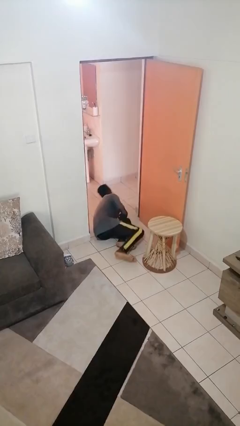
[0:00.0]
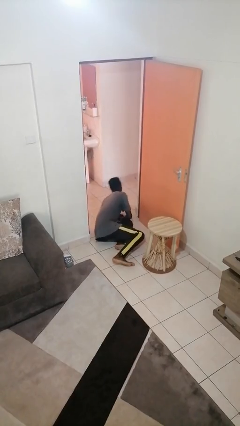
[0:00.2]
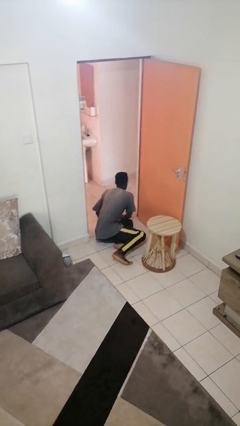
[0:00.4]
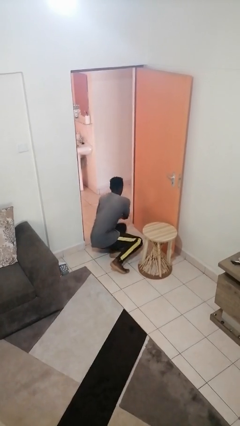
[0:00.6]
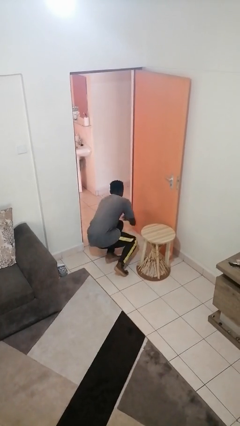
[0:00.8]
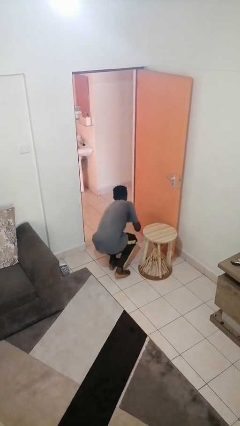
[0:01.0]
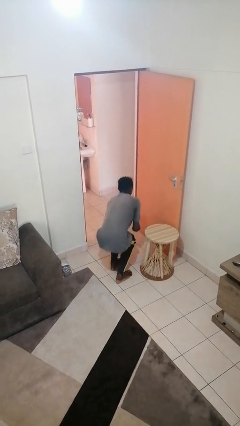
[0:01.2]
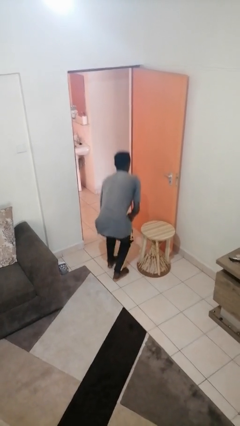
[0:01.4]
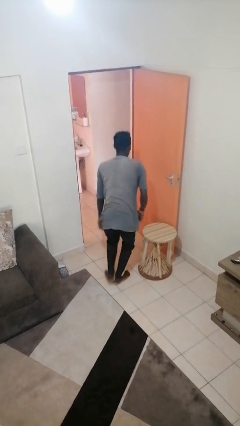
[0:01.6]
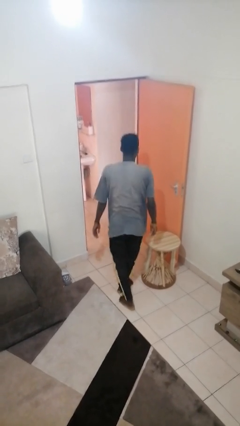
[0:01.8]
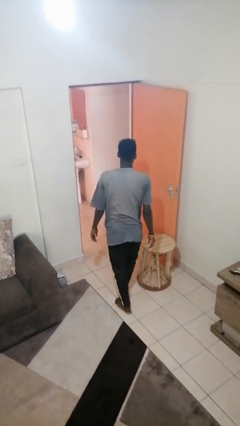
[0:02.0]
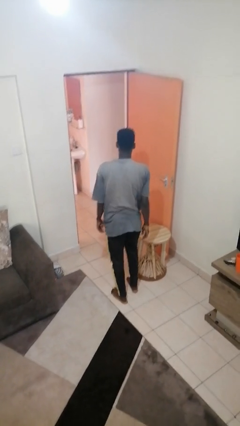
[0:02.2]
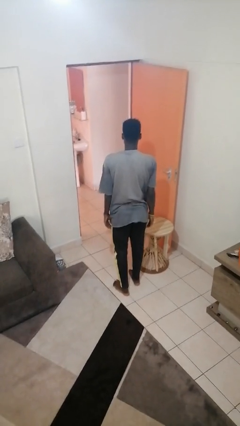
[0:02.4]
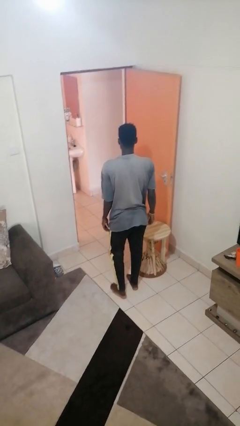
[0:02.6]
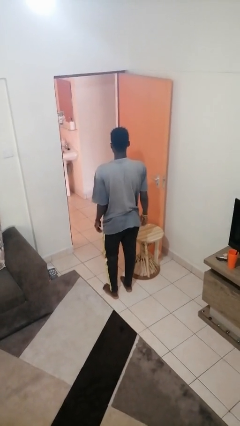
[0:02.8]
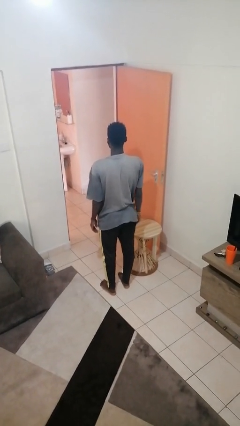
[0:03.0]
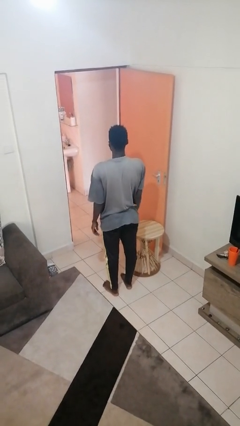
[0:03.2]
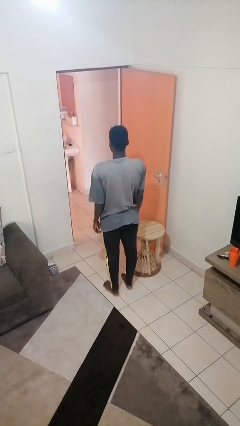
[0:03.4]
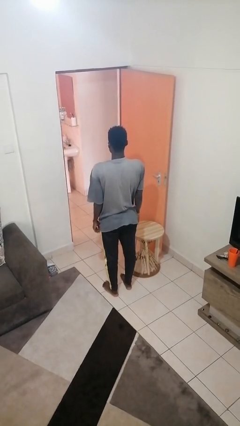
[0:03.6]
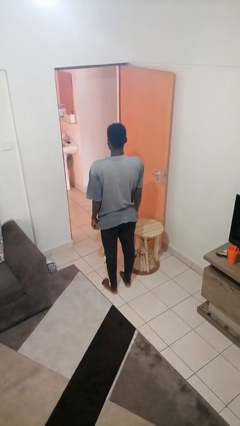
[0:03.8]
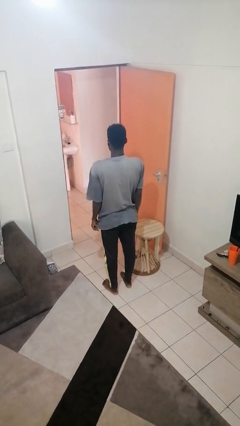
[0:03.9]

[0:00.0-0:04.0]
person stands up from floor

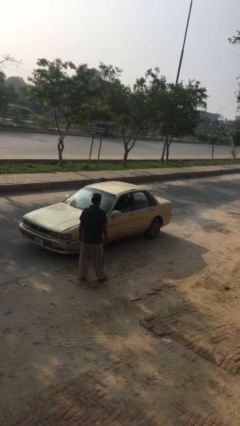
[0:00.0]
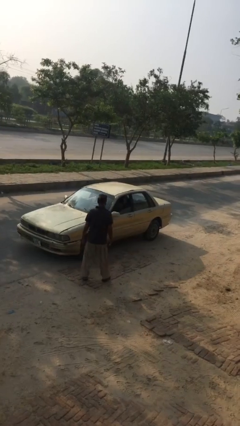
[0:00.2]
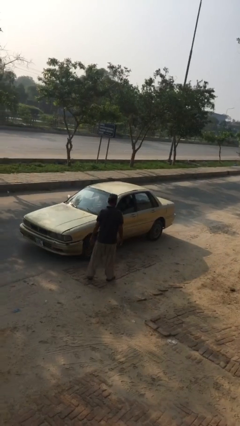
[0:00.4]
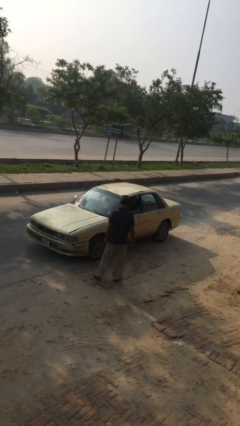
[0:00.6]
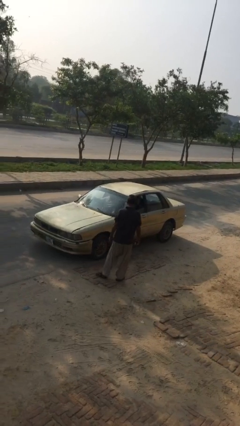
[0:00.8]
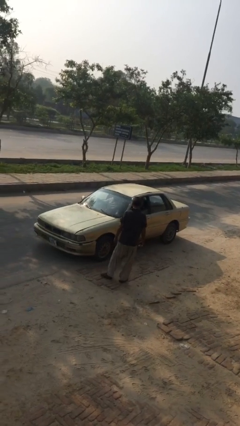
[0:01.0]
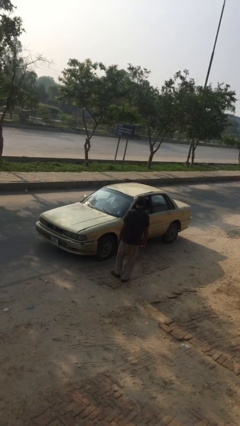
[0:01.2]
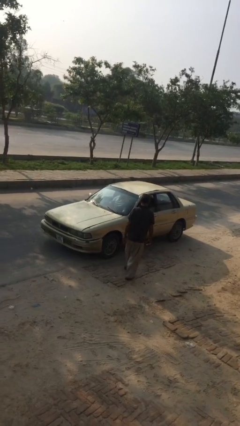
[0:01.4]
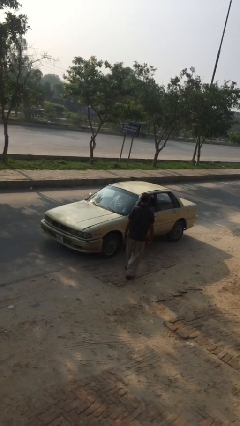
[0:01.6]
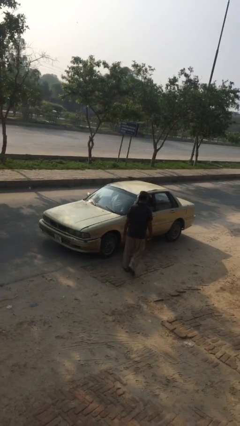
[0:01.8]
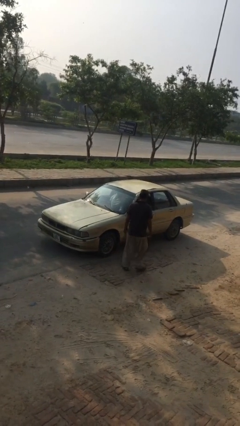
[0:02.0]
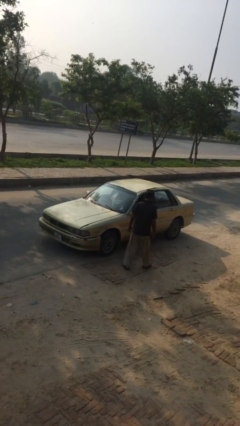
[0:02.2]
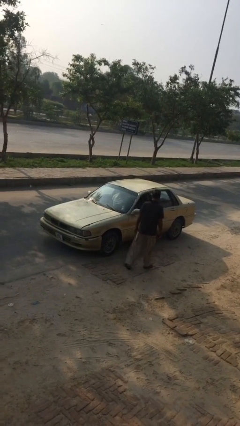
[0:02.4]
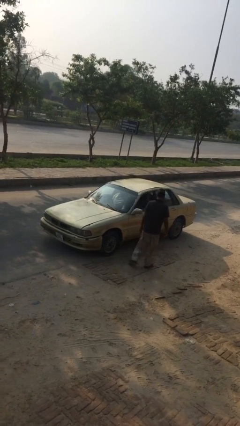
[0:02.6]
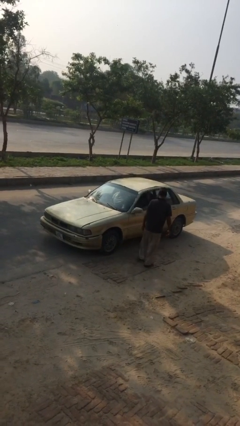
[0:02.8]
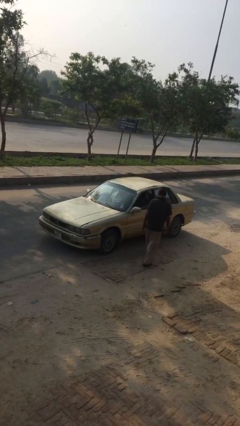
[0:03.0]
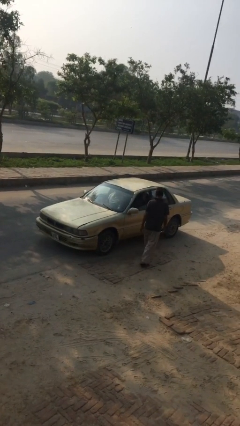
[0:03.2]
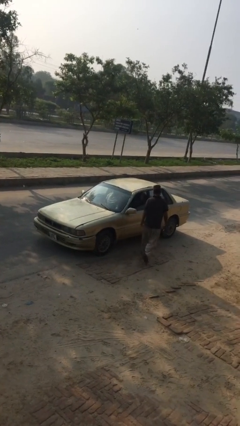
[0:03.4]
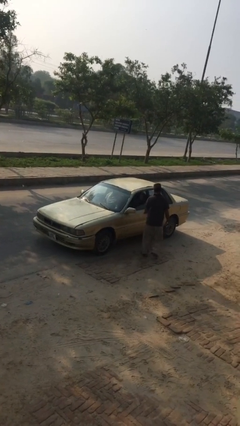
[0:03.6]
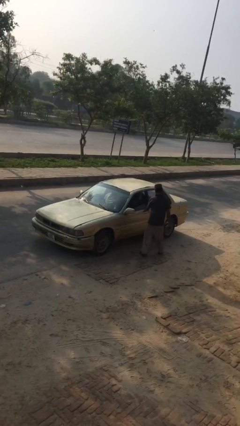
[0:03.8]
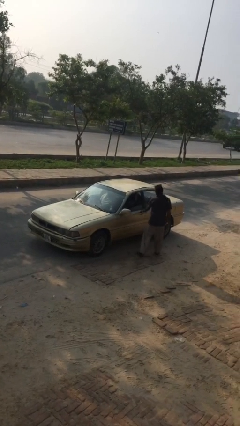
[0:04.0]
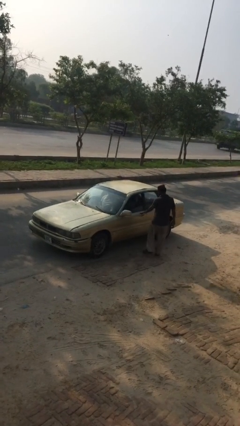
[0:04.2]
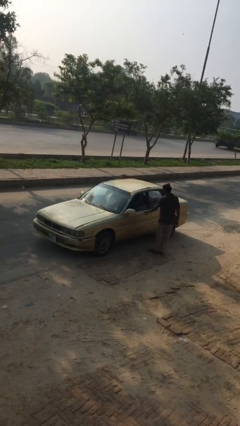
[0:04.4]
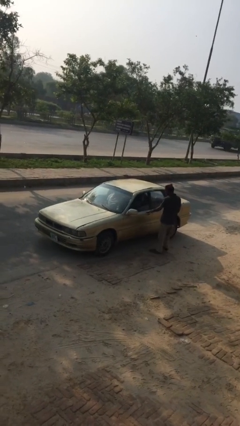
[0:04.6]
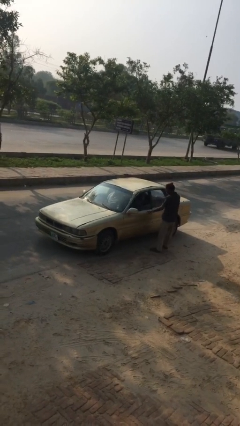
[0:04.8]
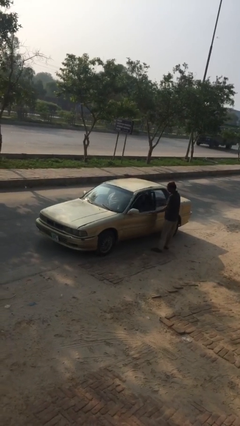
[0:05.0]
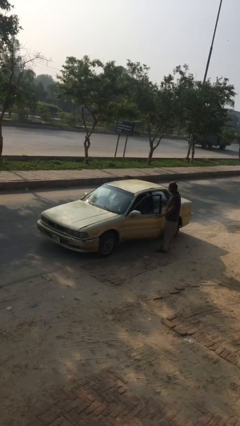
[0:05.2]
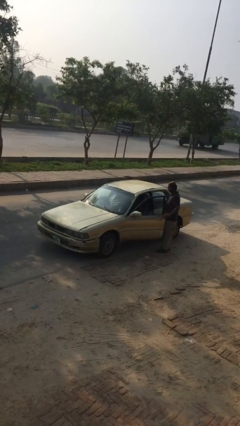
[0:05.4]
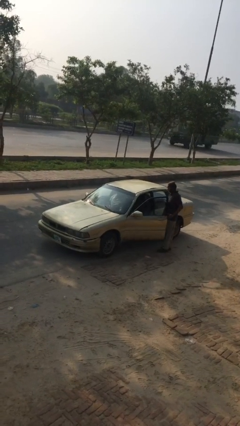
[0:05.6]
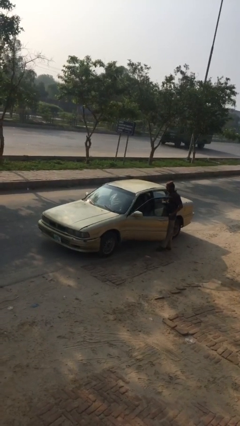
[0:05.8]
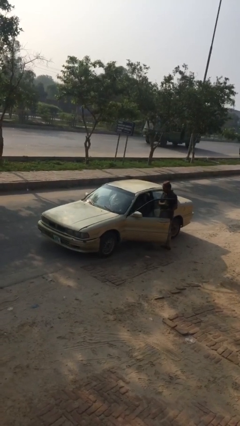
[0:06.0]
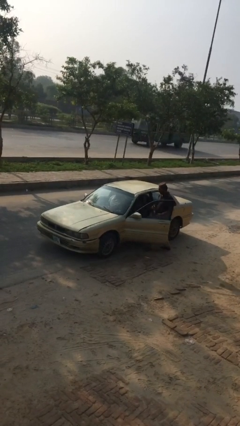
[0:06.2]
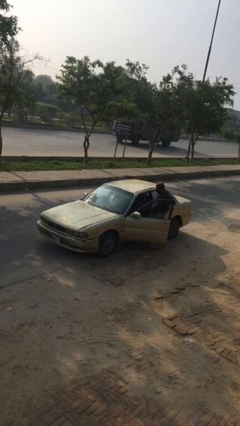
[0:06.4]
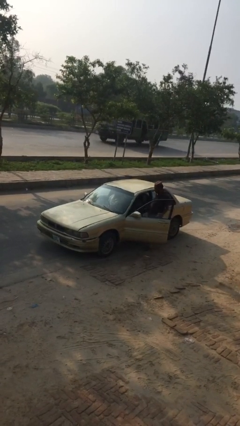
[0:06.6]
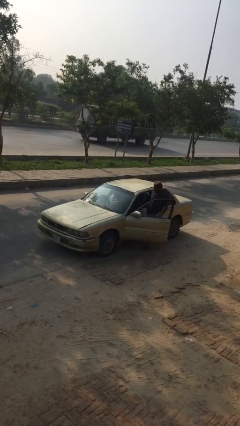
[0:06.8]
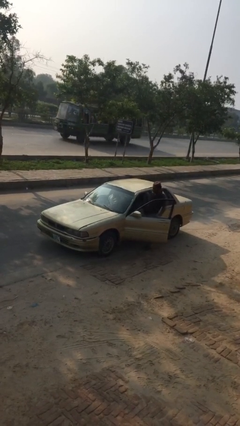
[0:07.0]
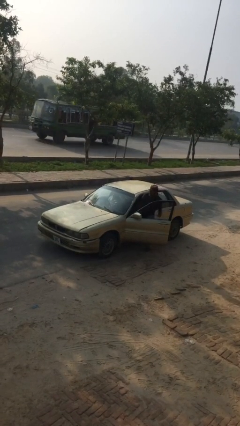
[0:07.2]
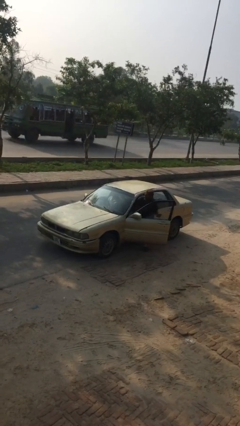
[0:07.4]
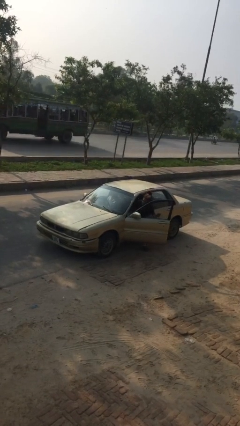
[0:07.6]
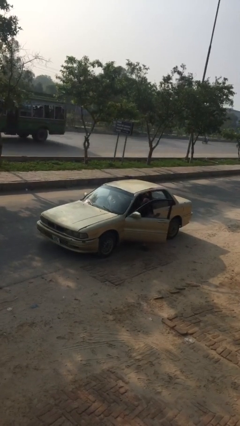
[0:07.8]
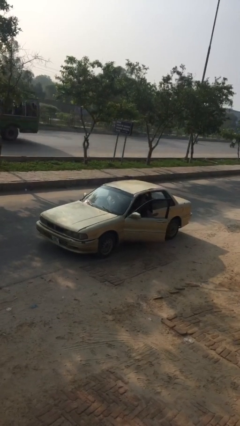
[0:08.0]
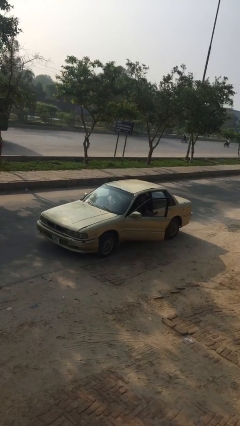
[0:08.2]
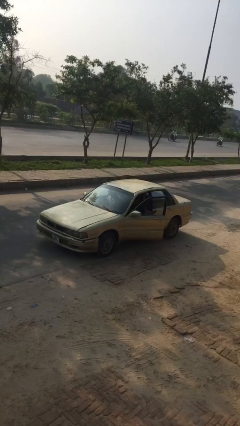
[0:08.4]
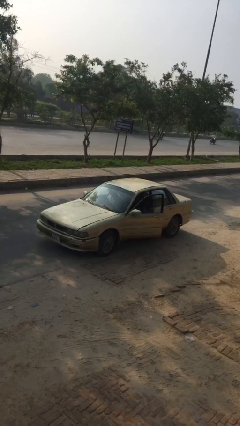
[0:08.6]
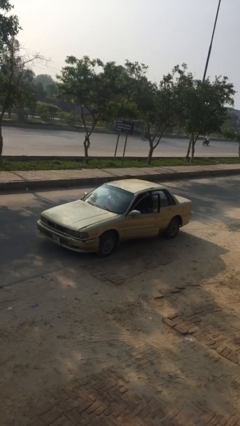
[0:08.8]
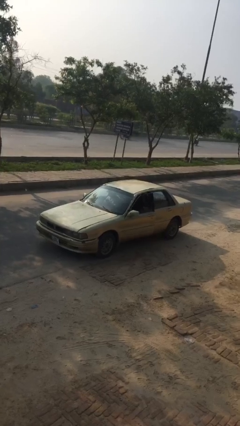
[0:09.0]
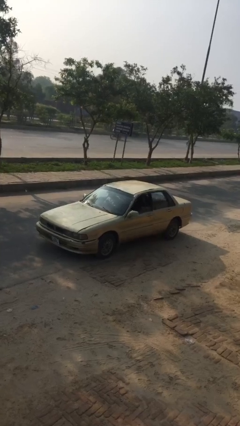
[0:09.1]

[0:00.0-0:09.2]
car picks up person

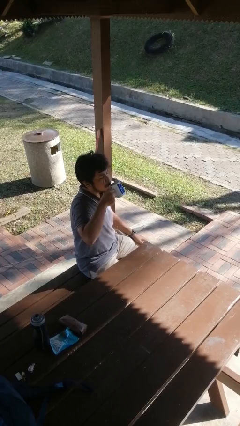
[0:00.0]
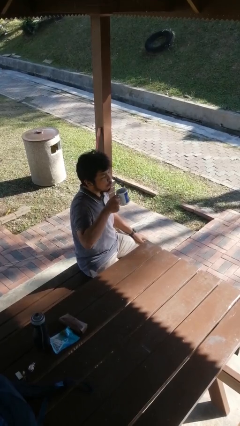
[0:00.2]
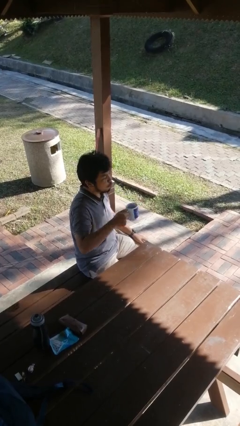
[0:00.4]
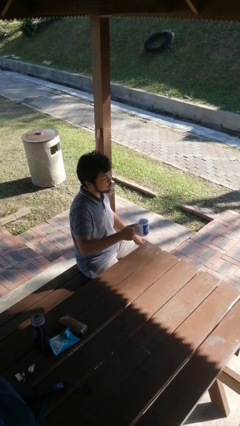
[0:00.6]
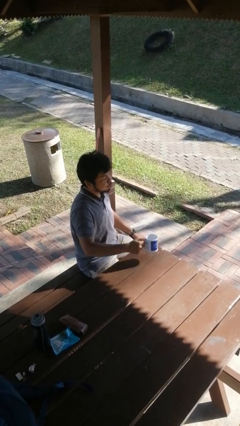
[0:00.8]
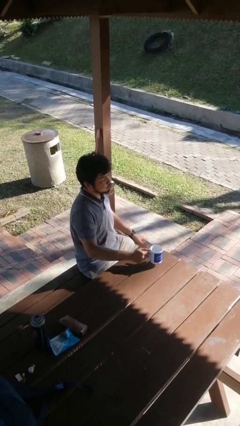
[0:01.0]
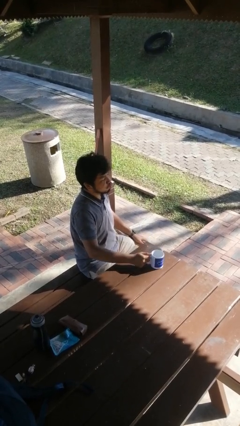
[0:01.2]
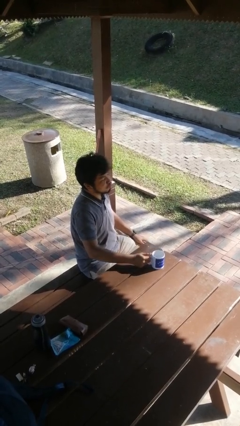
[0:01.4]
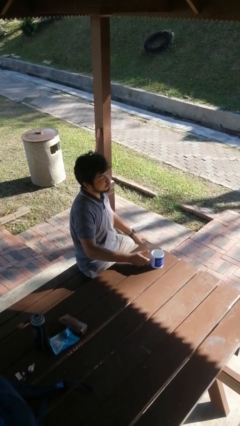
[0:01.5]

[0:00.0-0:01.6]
person puts down object on table

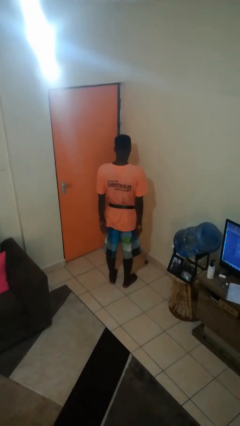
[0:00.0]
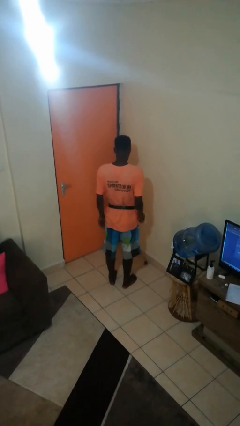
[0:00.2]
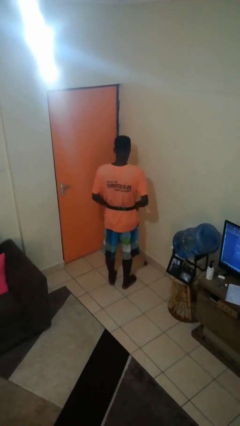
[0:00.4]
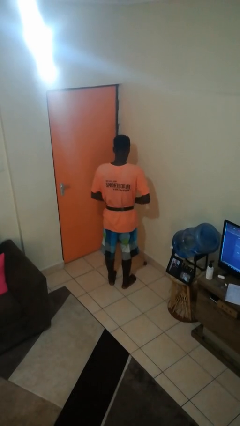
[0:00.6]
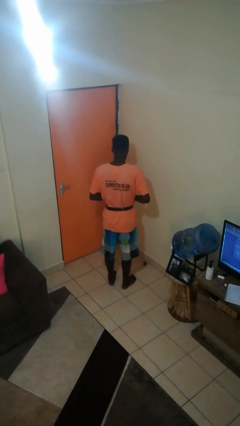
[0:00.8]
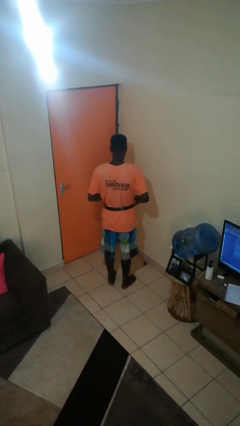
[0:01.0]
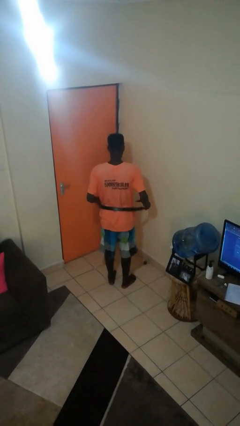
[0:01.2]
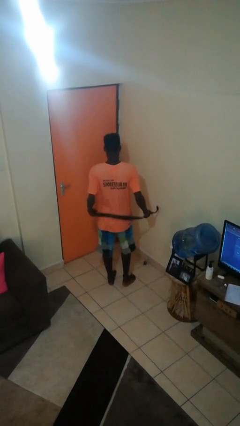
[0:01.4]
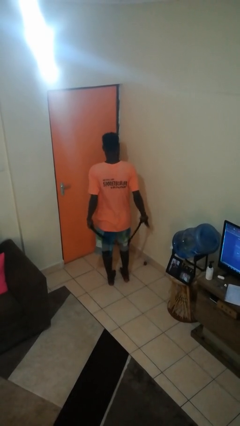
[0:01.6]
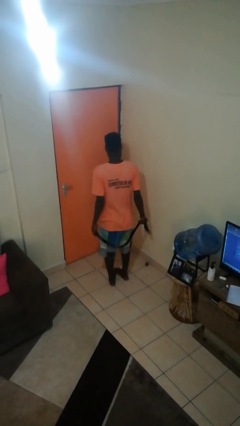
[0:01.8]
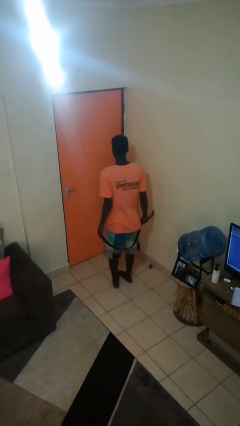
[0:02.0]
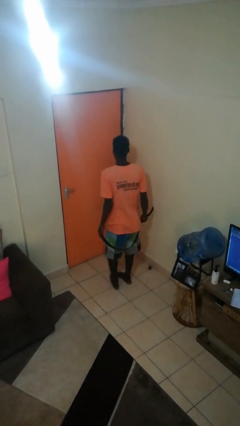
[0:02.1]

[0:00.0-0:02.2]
person takes off belt

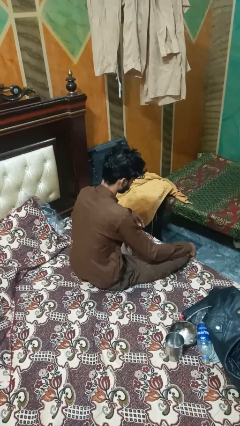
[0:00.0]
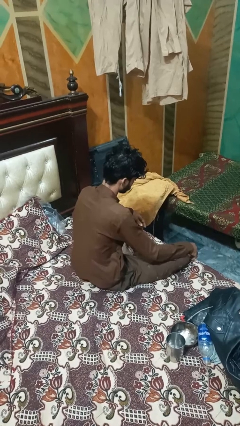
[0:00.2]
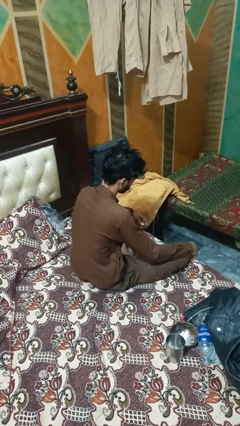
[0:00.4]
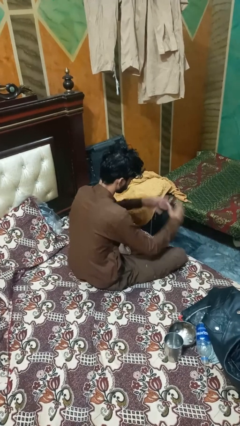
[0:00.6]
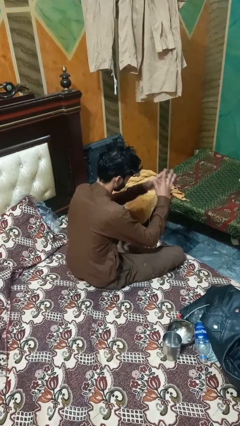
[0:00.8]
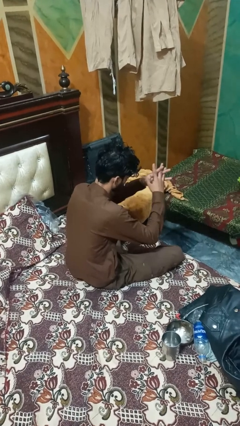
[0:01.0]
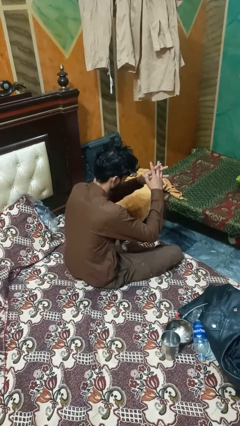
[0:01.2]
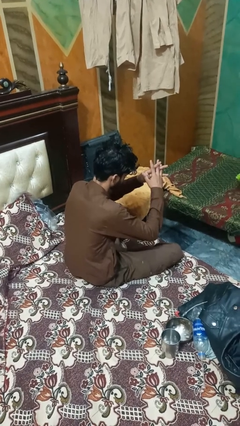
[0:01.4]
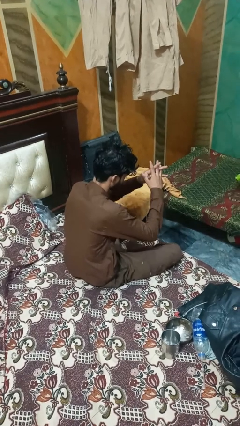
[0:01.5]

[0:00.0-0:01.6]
person snaps fingers
